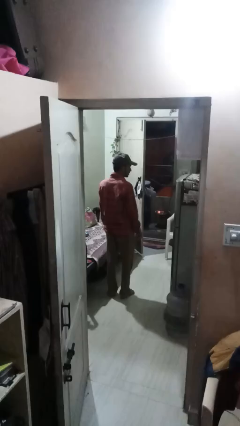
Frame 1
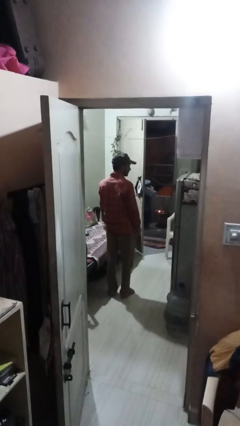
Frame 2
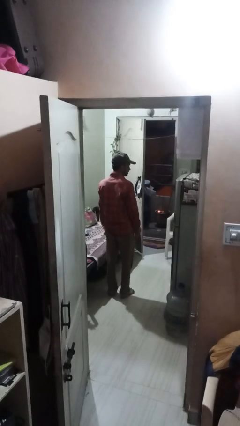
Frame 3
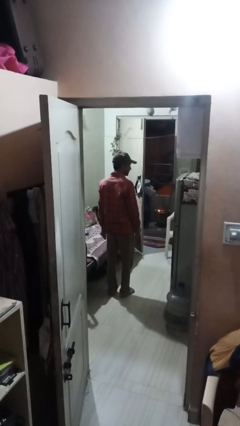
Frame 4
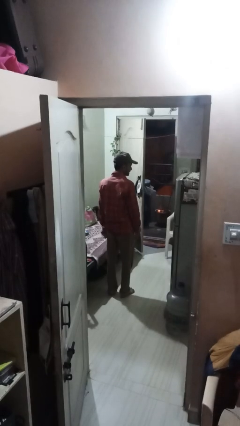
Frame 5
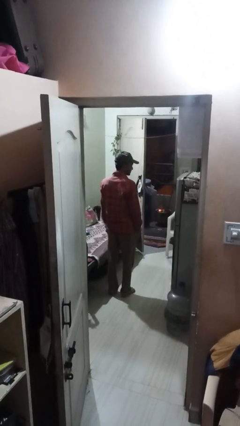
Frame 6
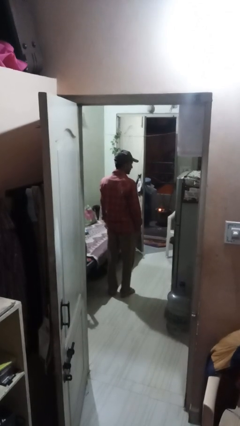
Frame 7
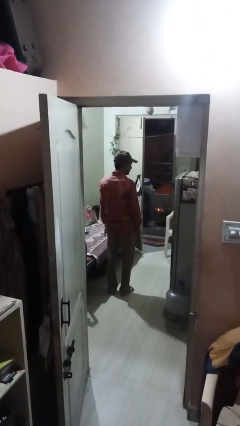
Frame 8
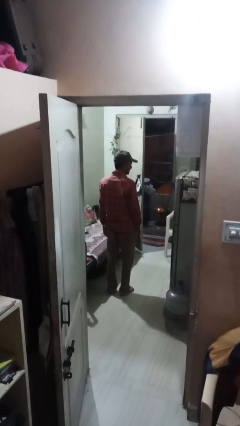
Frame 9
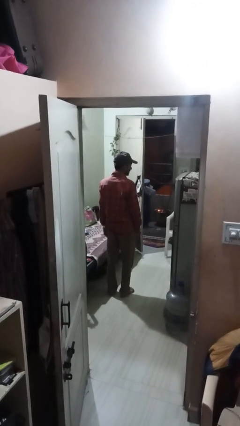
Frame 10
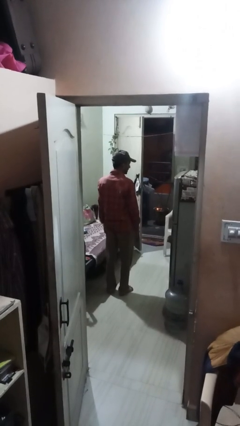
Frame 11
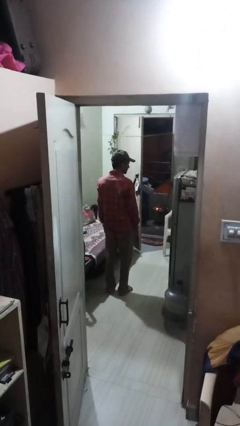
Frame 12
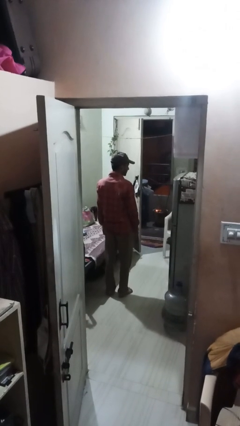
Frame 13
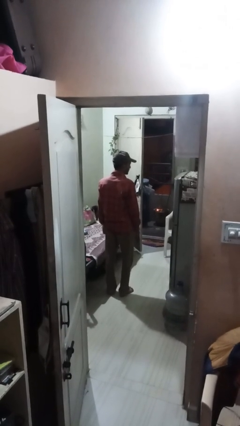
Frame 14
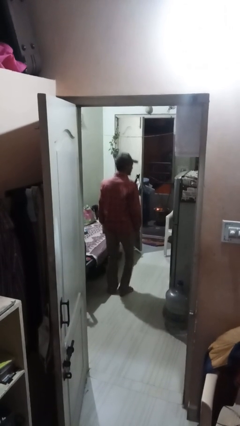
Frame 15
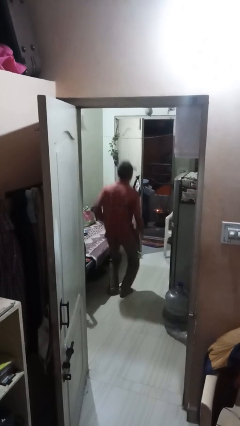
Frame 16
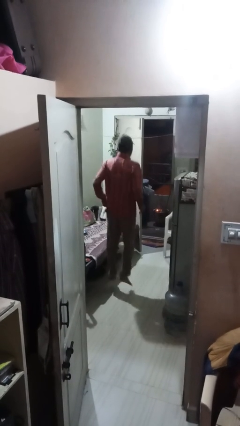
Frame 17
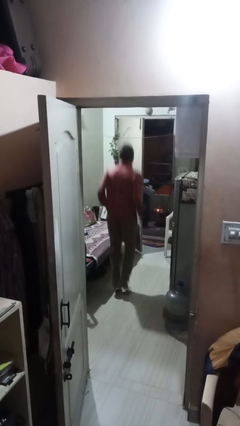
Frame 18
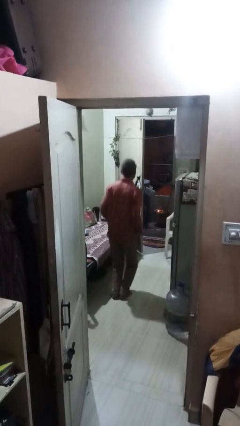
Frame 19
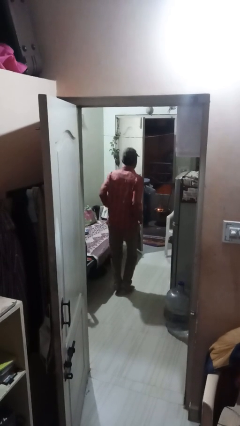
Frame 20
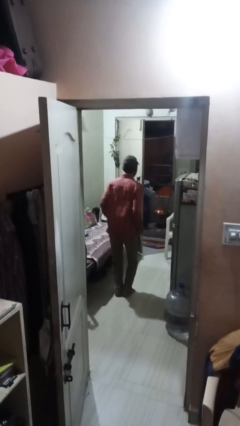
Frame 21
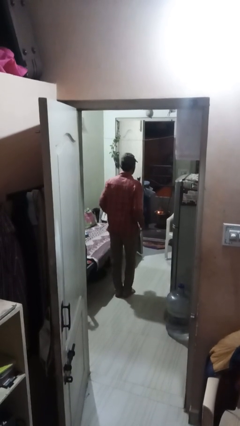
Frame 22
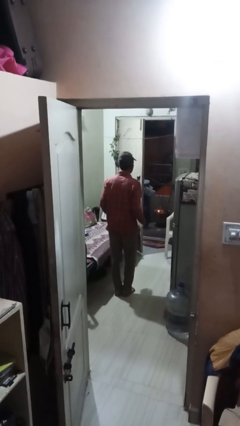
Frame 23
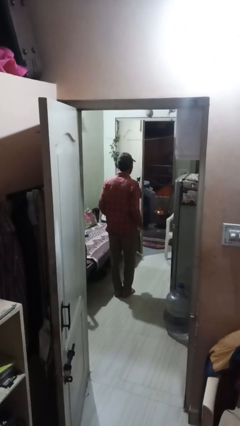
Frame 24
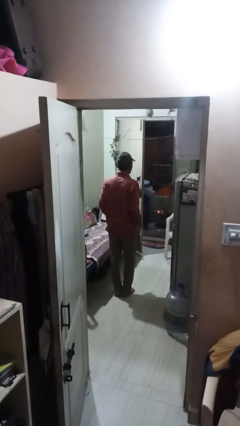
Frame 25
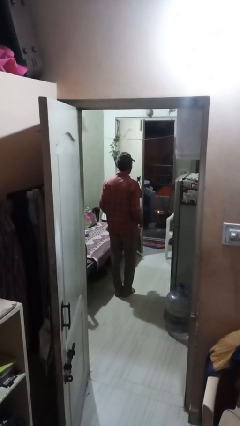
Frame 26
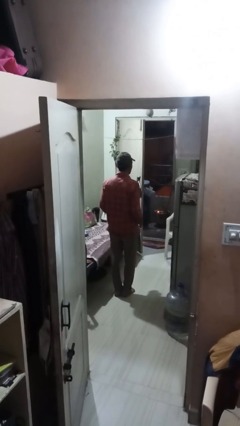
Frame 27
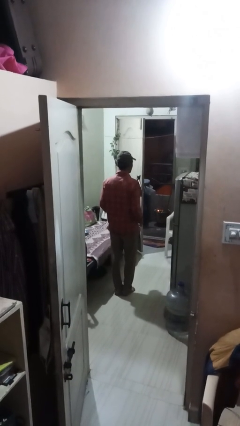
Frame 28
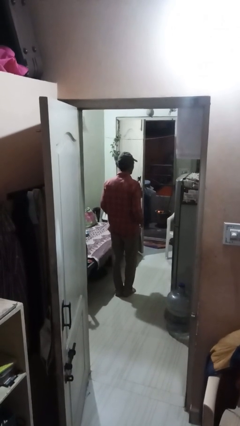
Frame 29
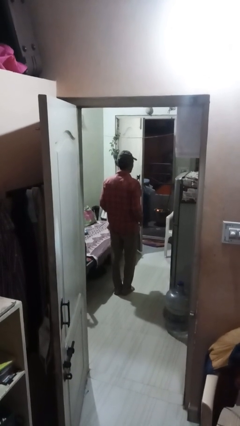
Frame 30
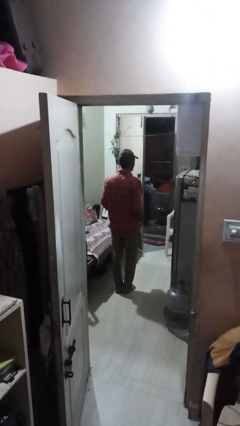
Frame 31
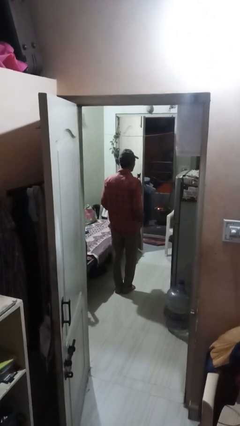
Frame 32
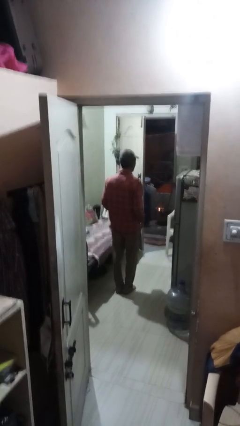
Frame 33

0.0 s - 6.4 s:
person jumps

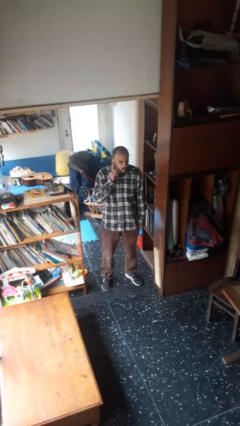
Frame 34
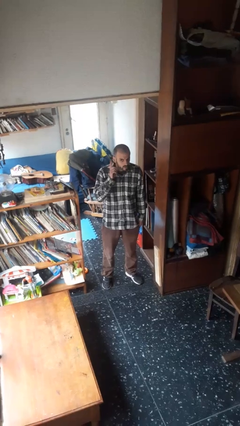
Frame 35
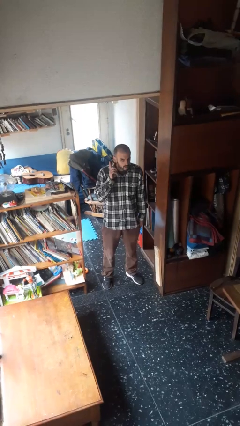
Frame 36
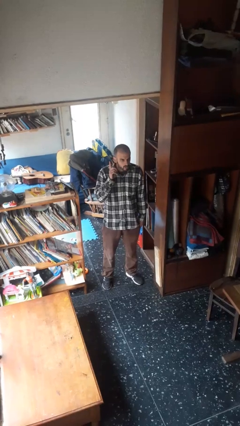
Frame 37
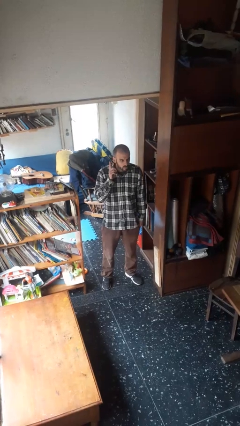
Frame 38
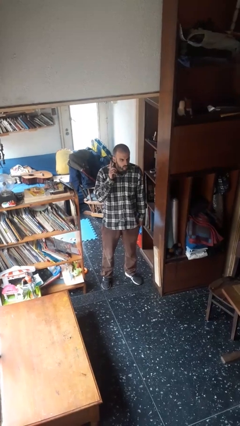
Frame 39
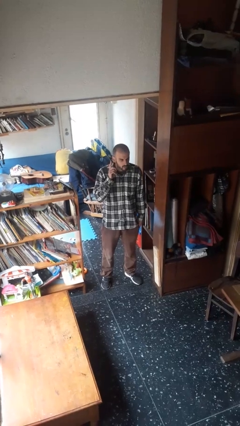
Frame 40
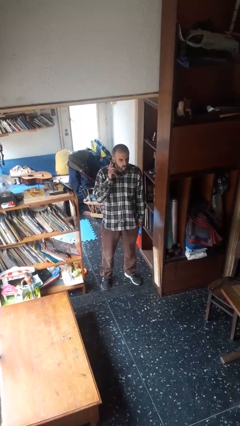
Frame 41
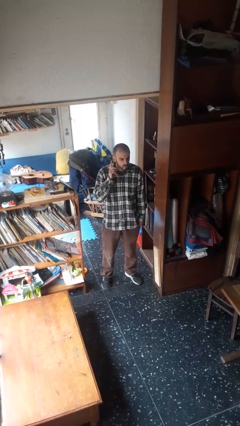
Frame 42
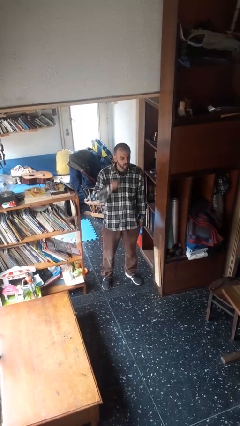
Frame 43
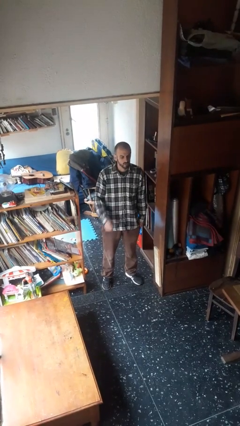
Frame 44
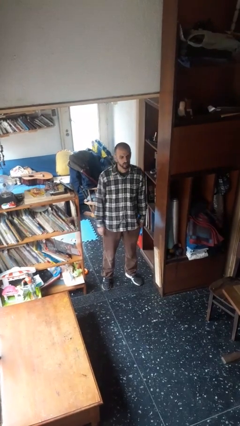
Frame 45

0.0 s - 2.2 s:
person gestures listen closely

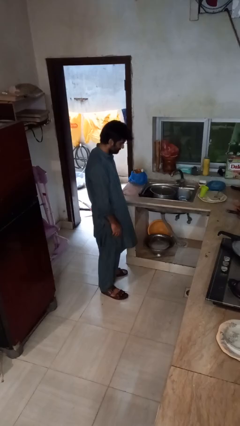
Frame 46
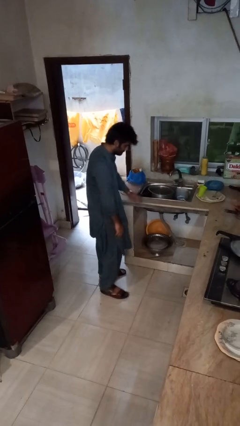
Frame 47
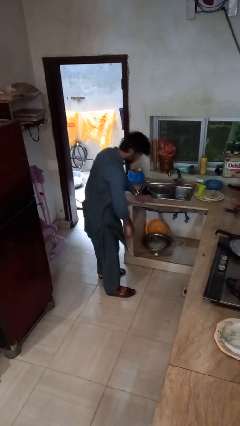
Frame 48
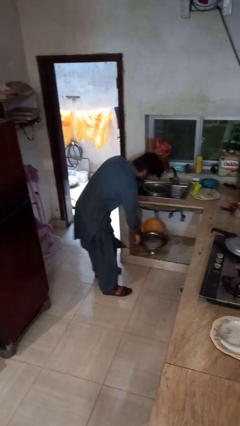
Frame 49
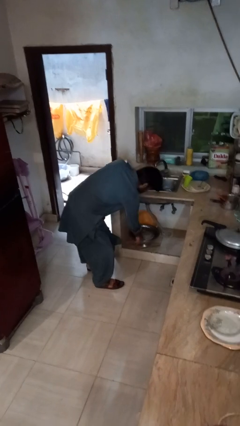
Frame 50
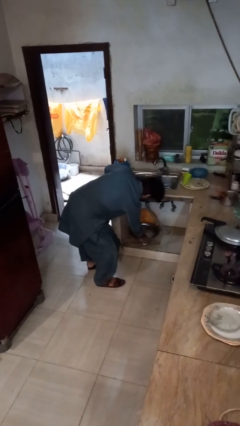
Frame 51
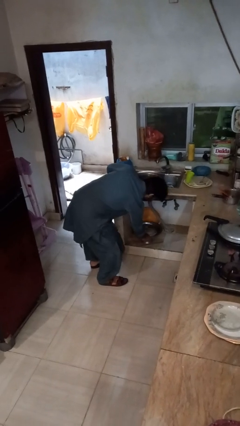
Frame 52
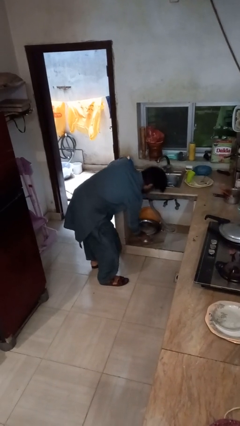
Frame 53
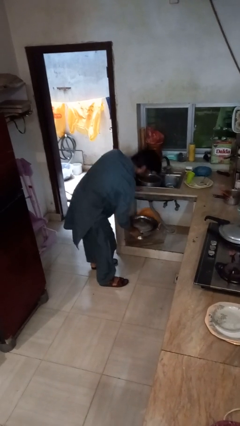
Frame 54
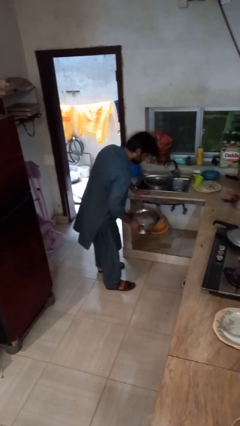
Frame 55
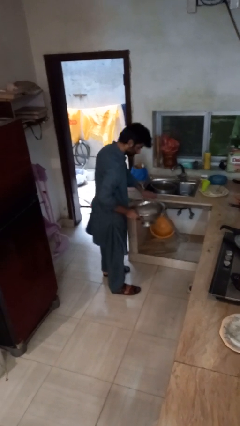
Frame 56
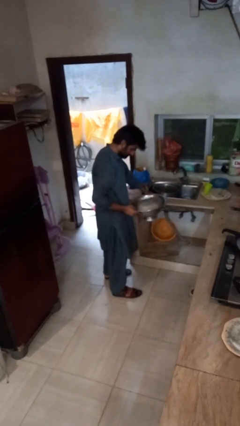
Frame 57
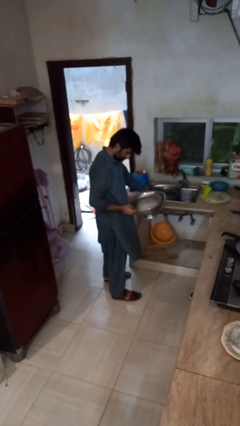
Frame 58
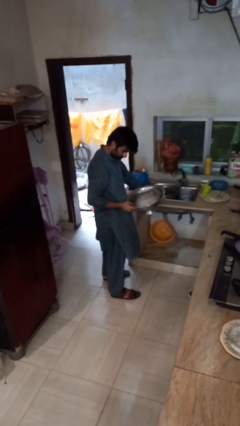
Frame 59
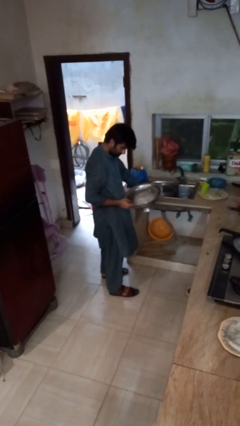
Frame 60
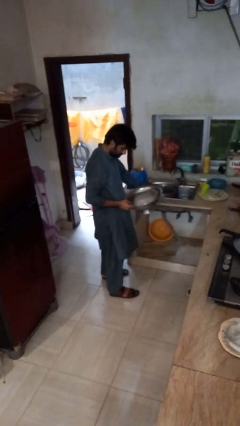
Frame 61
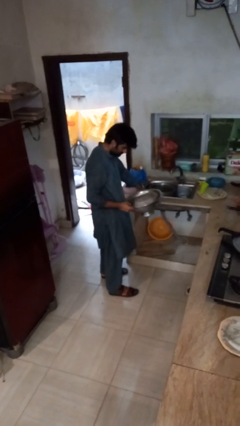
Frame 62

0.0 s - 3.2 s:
person picks up object from cabinet

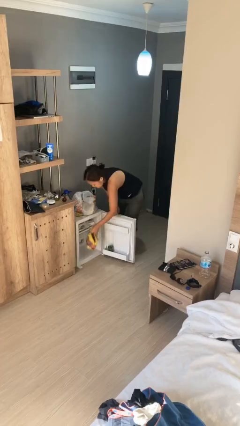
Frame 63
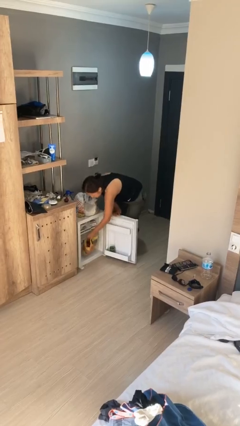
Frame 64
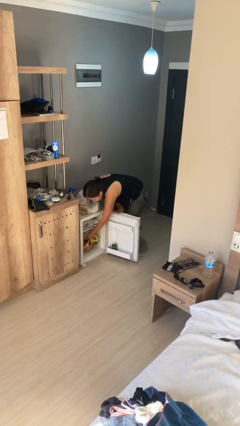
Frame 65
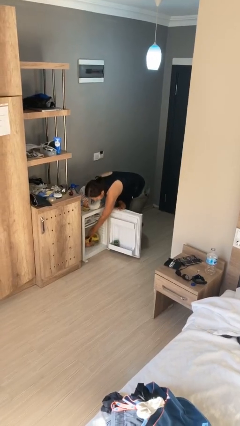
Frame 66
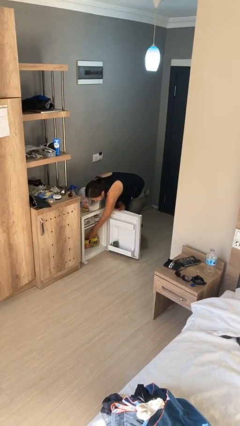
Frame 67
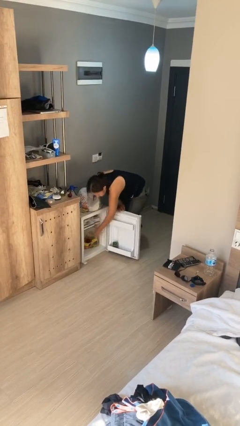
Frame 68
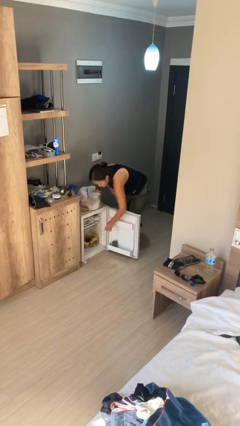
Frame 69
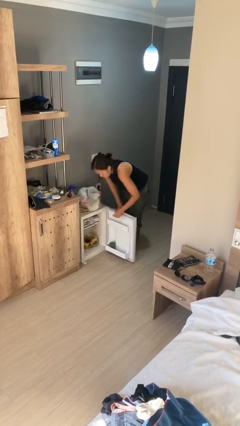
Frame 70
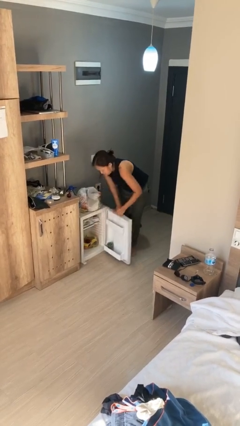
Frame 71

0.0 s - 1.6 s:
person puts object into refrigerator

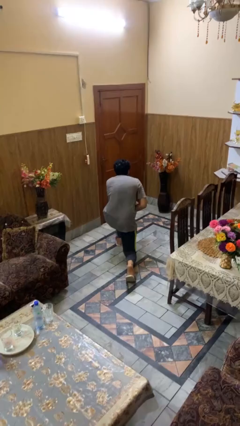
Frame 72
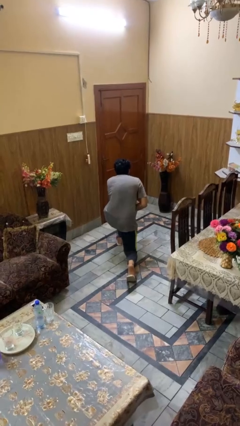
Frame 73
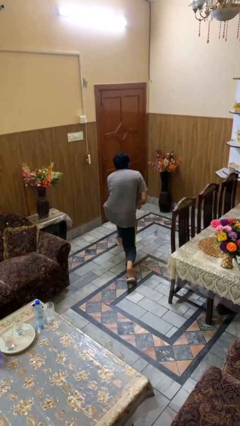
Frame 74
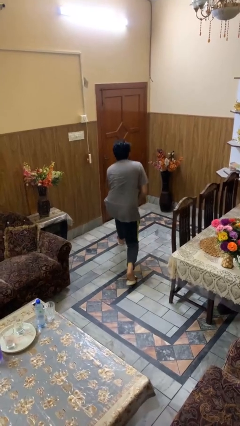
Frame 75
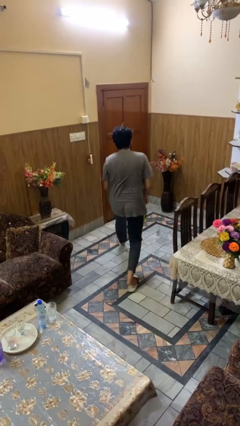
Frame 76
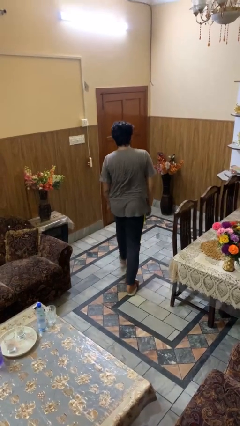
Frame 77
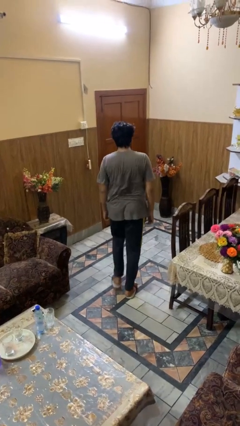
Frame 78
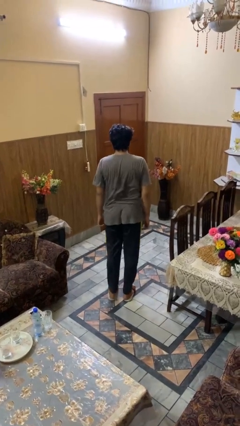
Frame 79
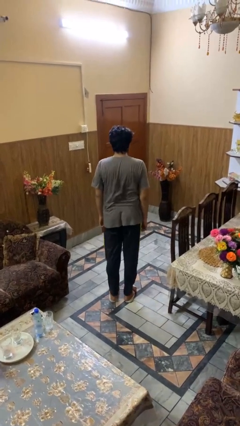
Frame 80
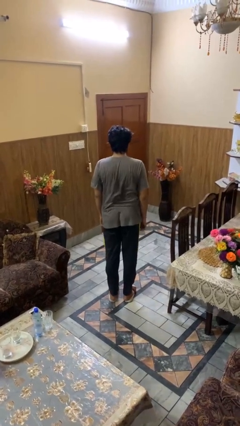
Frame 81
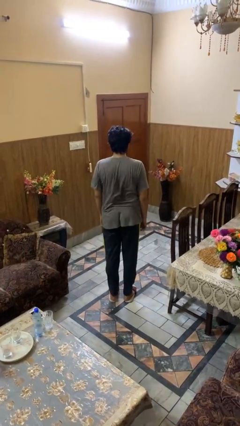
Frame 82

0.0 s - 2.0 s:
person stands up from floor

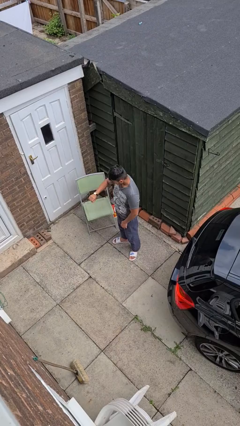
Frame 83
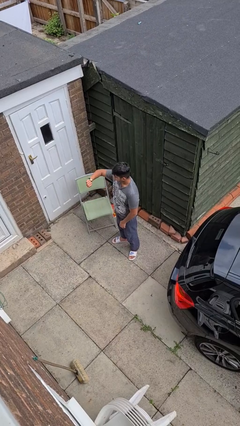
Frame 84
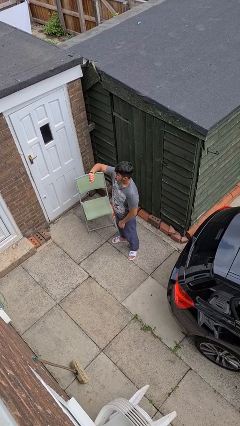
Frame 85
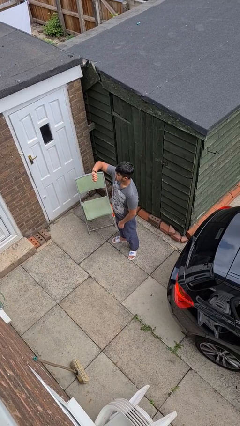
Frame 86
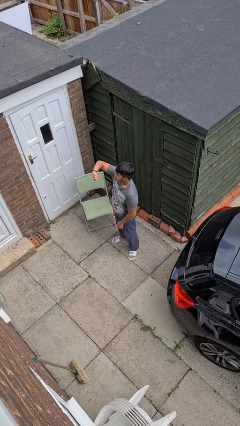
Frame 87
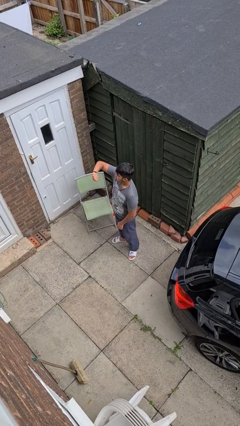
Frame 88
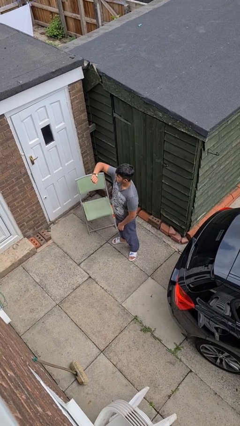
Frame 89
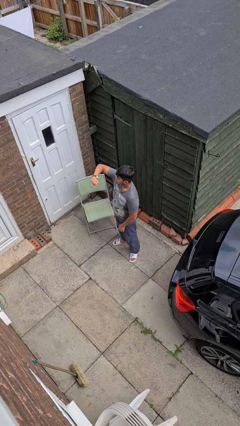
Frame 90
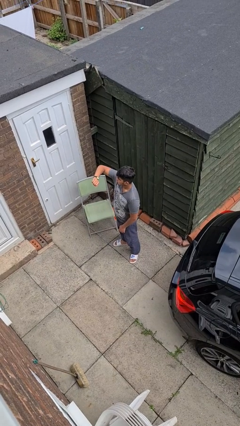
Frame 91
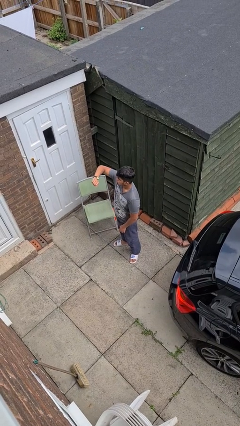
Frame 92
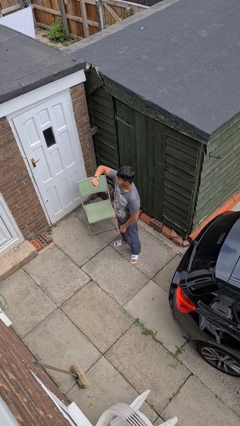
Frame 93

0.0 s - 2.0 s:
person looks at wristwatch
